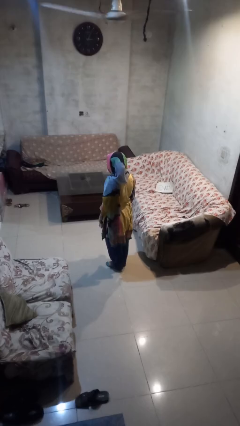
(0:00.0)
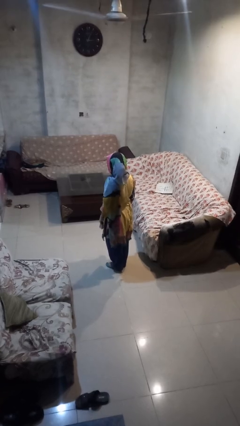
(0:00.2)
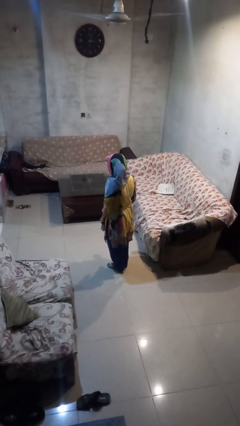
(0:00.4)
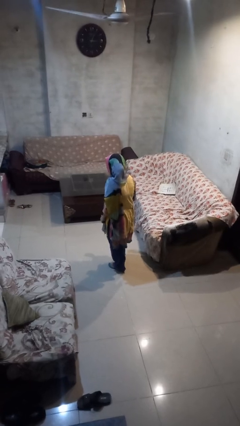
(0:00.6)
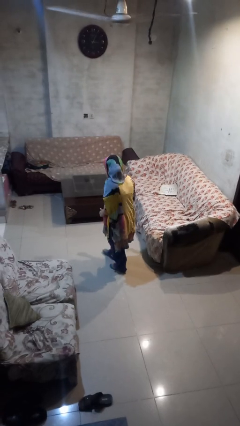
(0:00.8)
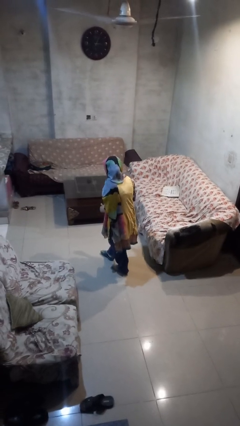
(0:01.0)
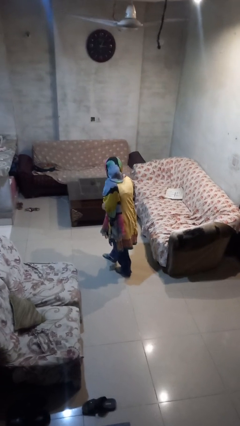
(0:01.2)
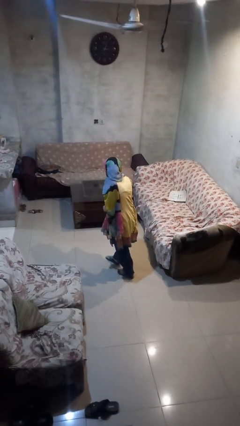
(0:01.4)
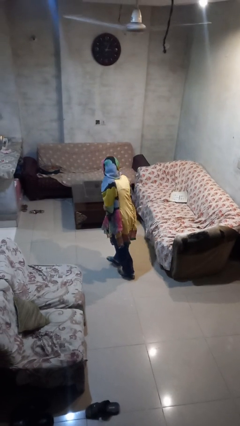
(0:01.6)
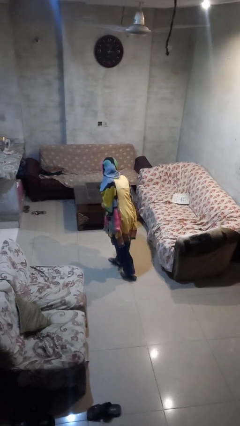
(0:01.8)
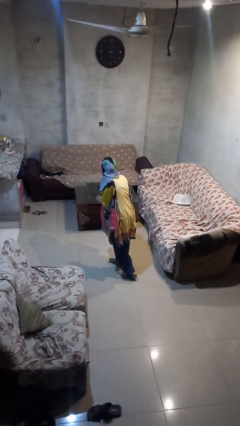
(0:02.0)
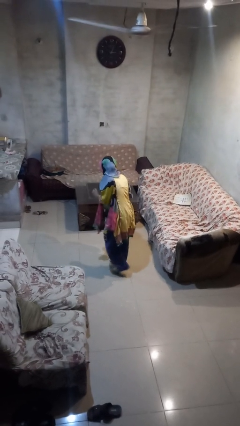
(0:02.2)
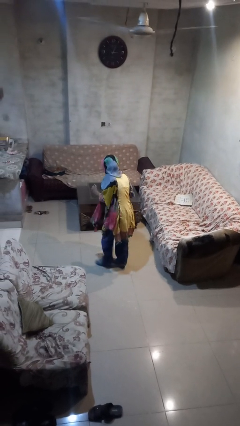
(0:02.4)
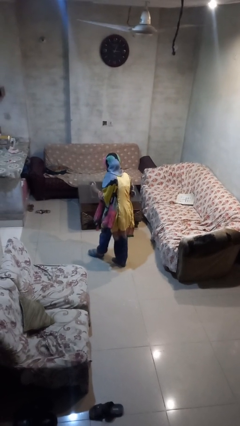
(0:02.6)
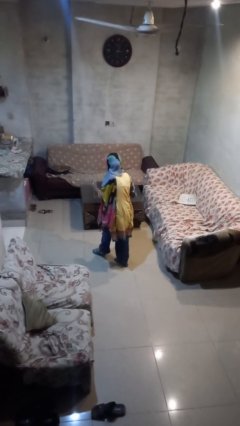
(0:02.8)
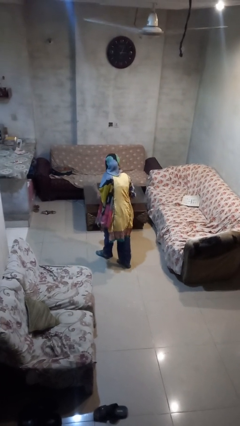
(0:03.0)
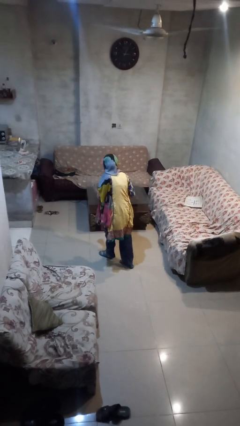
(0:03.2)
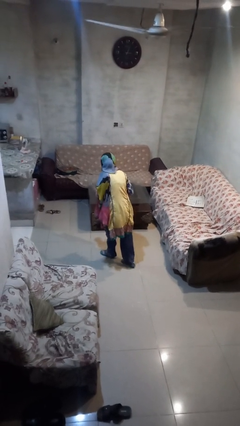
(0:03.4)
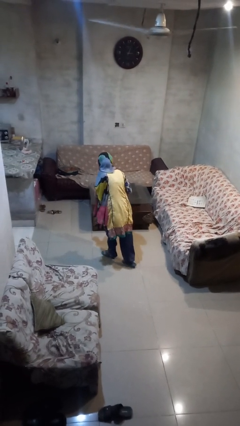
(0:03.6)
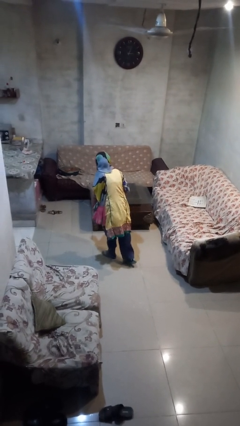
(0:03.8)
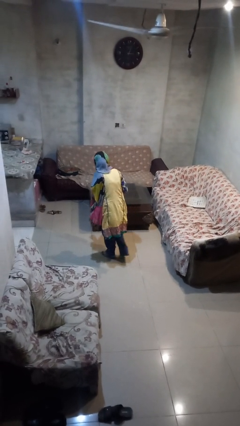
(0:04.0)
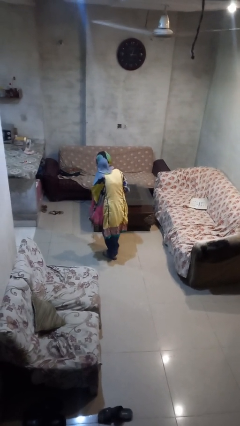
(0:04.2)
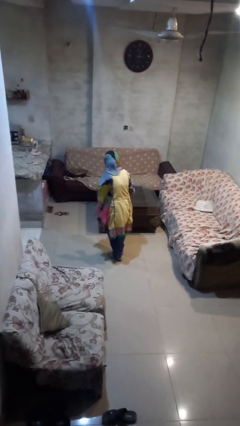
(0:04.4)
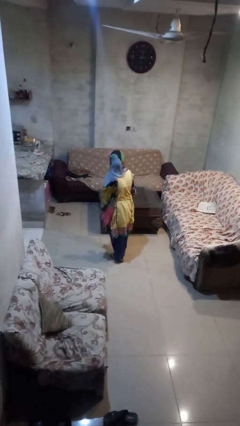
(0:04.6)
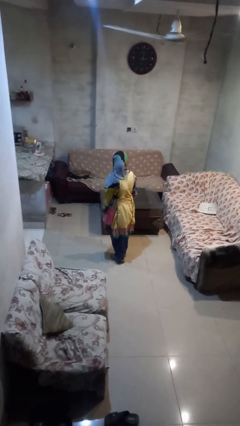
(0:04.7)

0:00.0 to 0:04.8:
person walks tiptoe

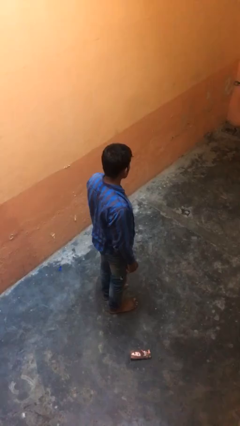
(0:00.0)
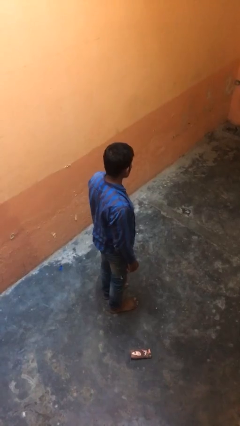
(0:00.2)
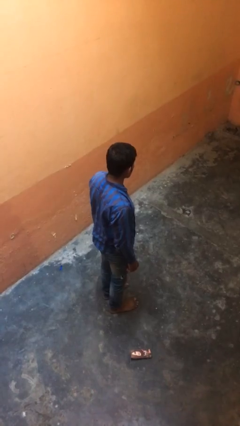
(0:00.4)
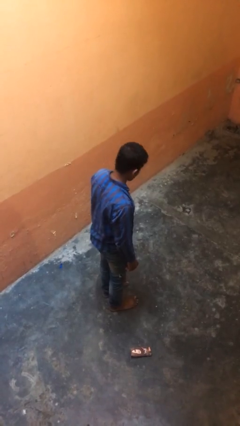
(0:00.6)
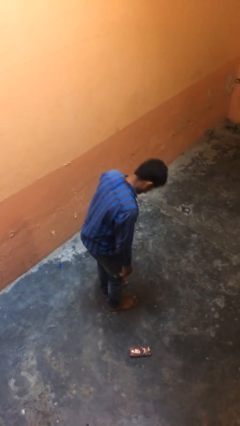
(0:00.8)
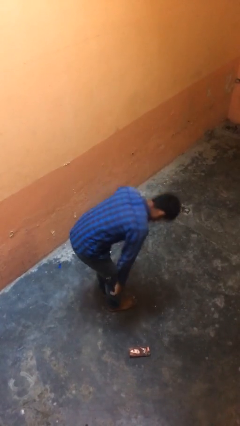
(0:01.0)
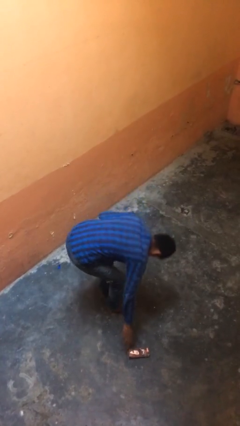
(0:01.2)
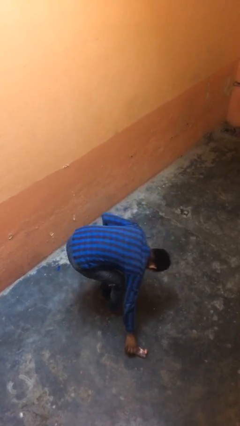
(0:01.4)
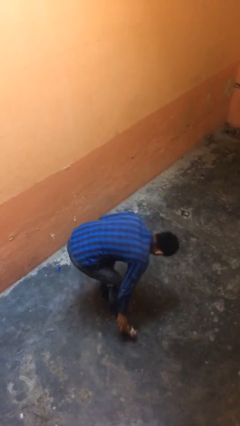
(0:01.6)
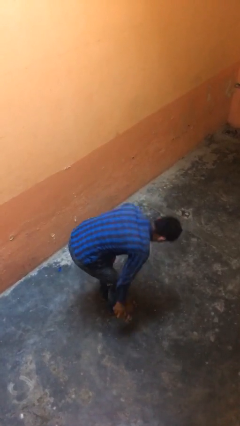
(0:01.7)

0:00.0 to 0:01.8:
person picks up object from floor

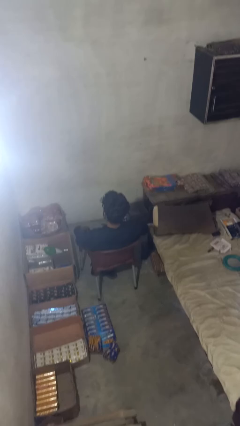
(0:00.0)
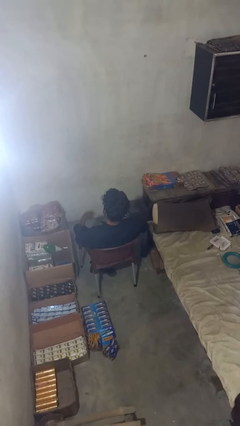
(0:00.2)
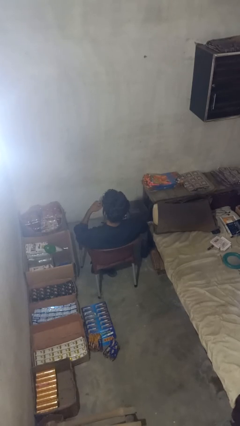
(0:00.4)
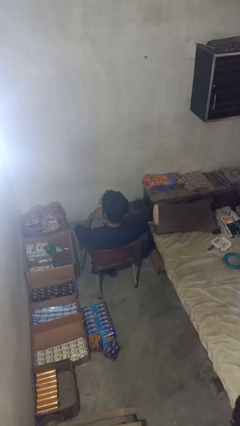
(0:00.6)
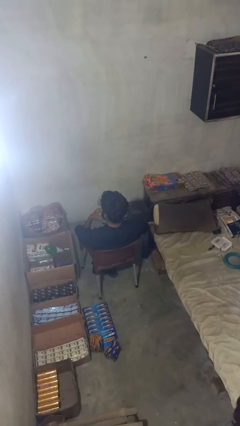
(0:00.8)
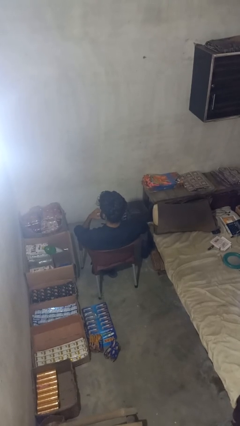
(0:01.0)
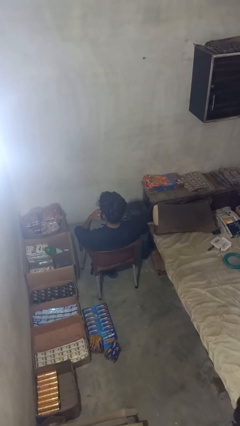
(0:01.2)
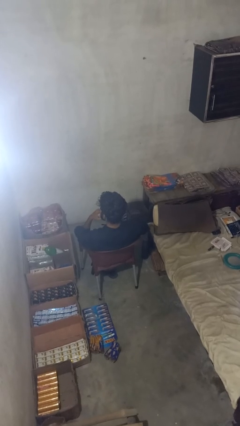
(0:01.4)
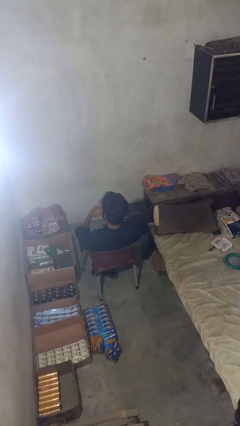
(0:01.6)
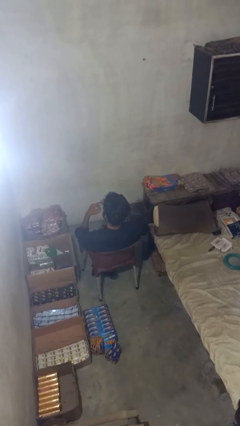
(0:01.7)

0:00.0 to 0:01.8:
person licks fingers

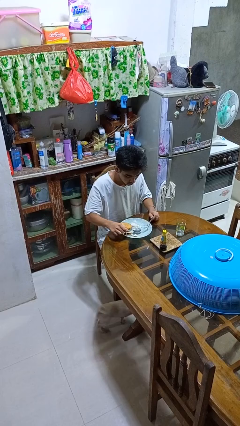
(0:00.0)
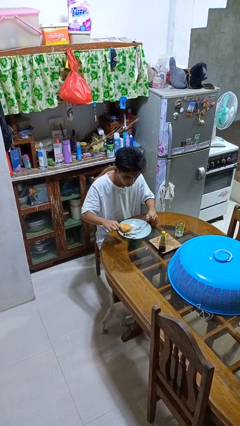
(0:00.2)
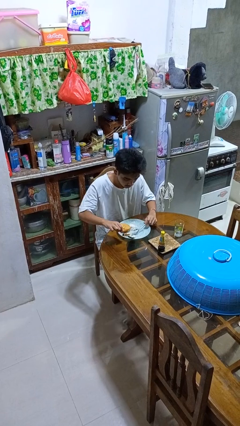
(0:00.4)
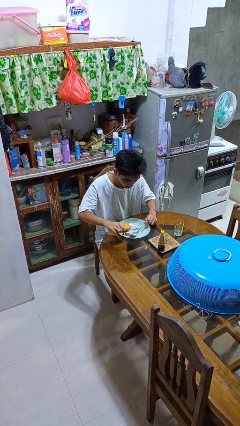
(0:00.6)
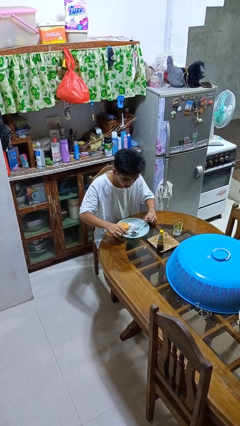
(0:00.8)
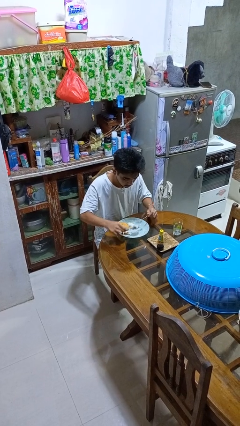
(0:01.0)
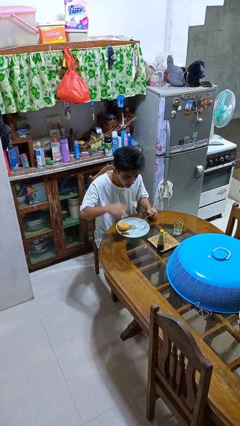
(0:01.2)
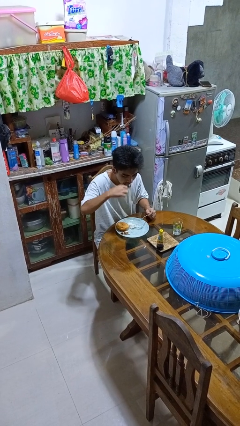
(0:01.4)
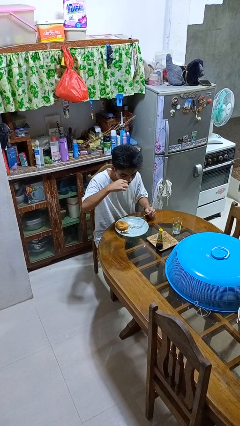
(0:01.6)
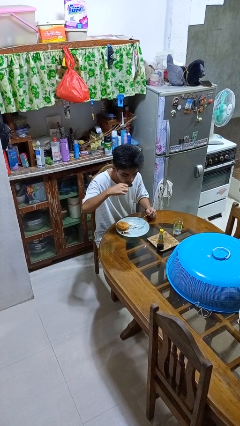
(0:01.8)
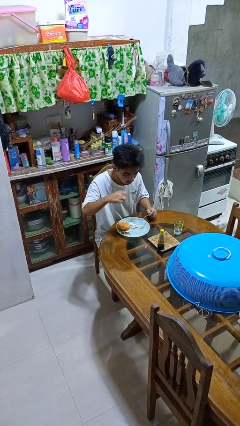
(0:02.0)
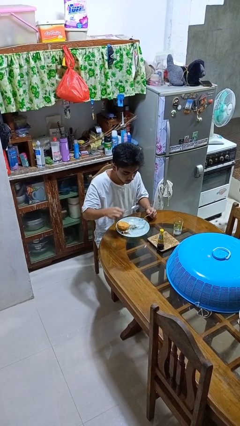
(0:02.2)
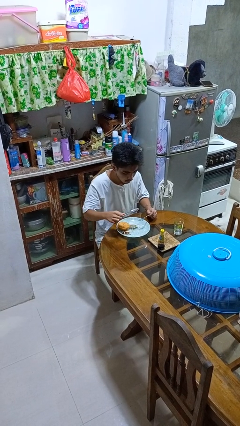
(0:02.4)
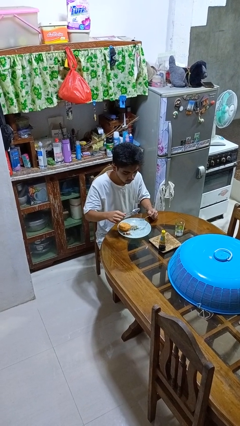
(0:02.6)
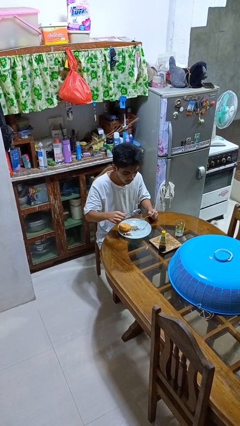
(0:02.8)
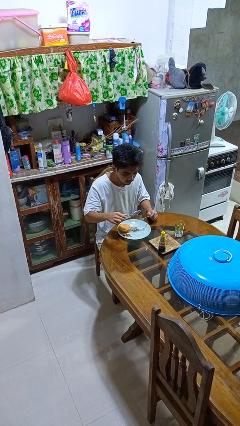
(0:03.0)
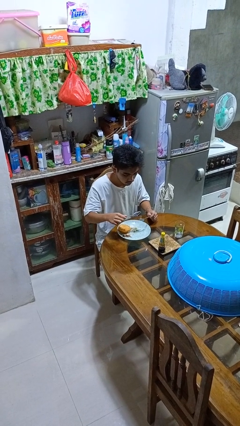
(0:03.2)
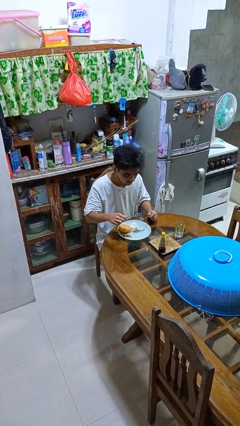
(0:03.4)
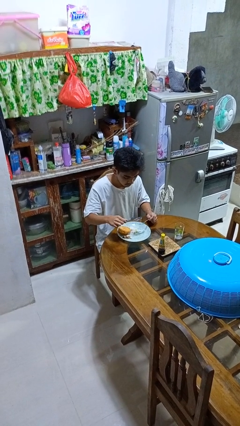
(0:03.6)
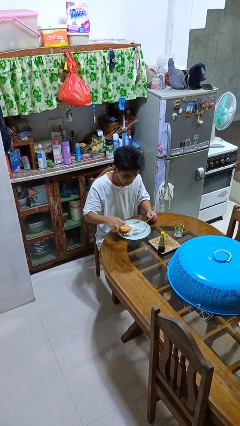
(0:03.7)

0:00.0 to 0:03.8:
person eats with utensil

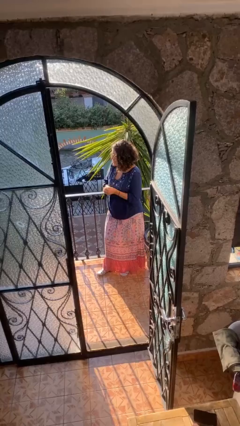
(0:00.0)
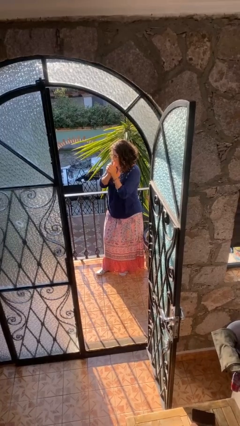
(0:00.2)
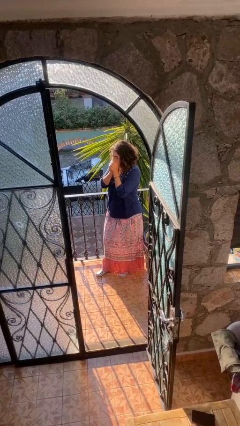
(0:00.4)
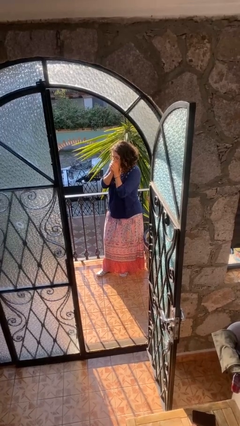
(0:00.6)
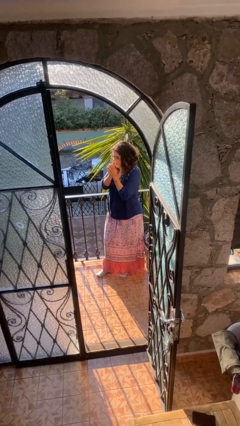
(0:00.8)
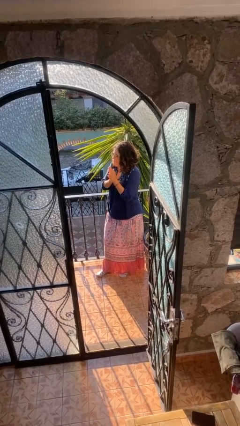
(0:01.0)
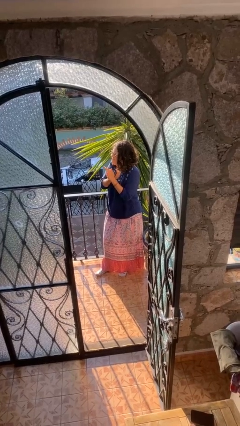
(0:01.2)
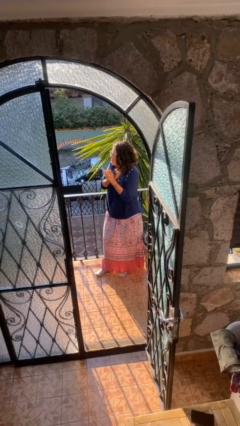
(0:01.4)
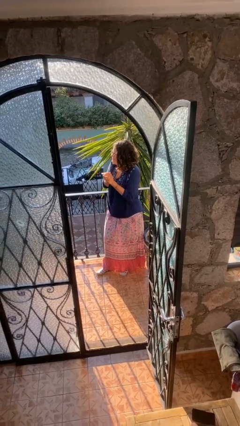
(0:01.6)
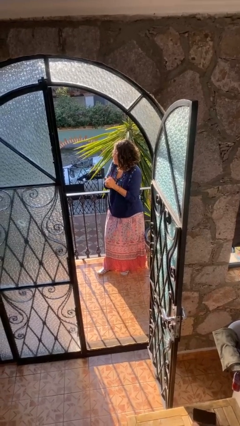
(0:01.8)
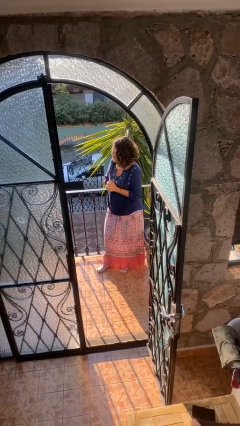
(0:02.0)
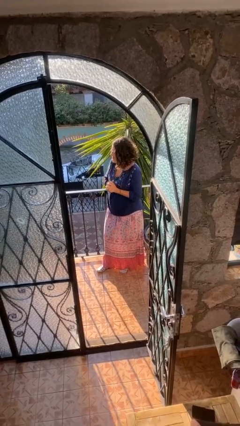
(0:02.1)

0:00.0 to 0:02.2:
person blows into hands

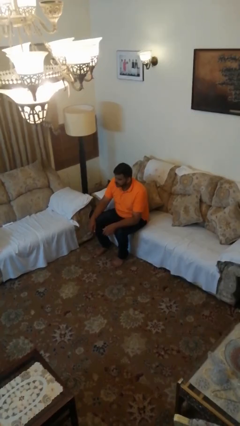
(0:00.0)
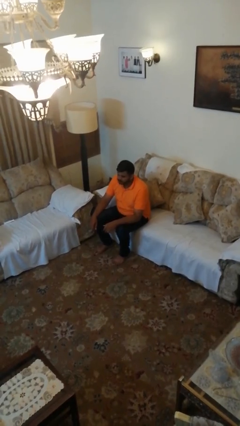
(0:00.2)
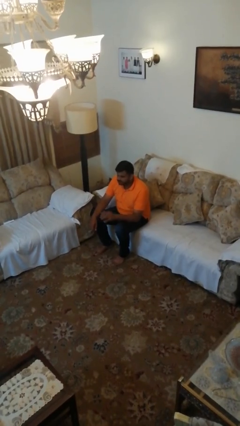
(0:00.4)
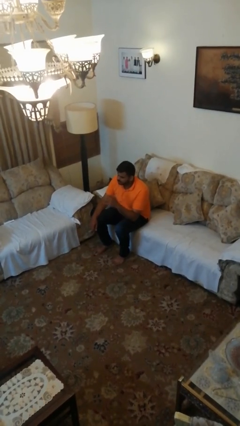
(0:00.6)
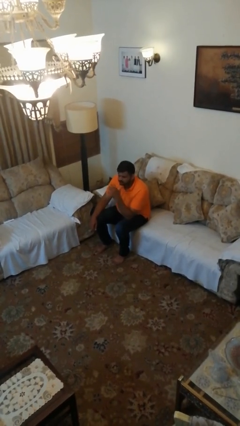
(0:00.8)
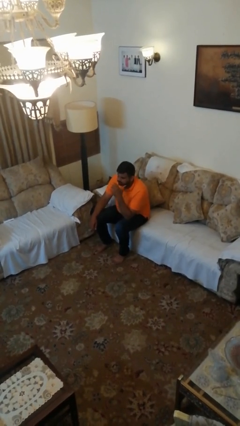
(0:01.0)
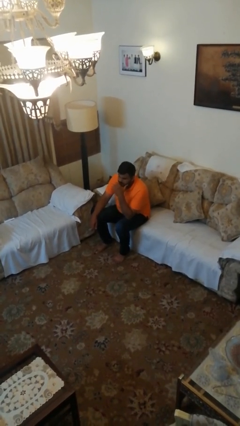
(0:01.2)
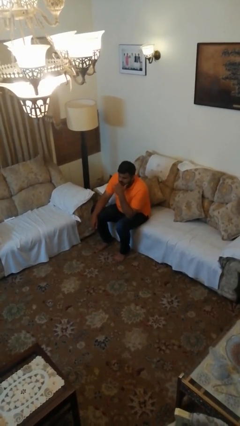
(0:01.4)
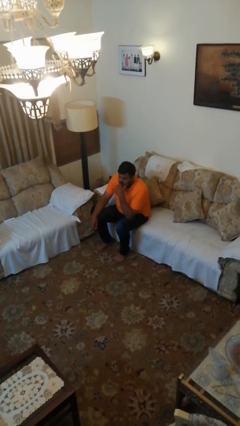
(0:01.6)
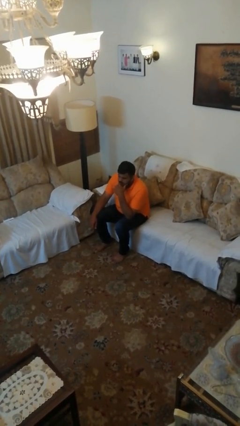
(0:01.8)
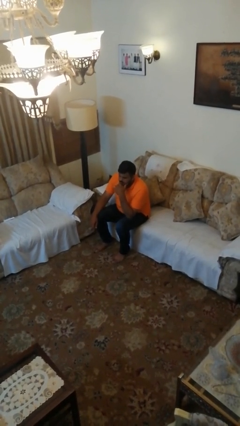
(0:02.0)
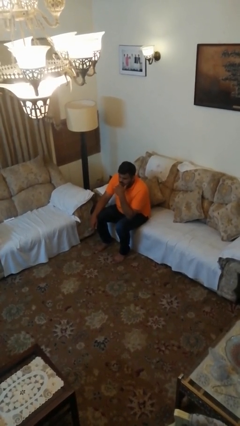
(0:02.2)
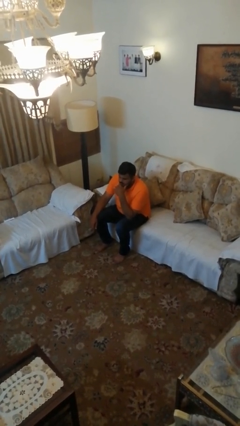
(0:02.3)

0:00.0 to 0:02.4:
person strokes chin

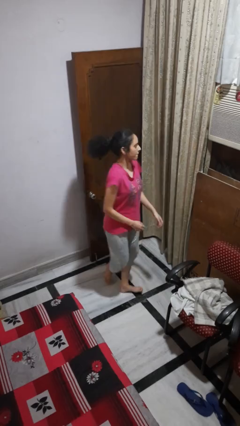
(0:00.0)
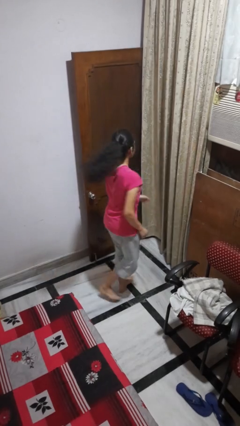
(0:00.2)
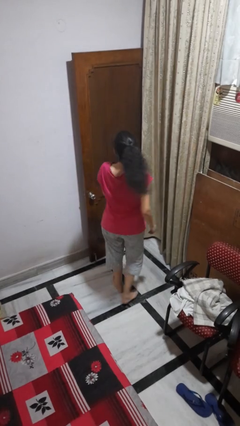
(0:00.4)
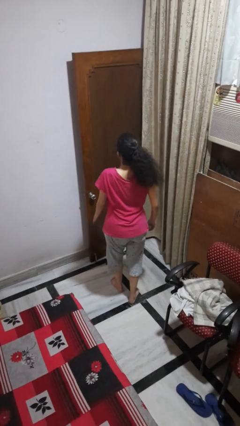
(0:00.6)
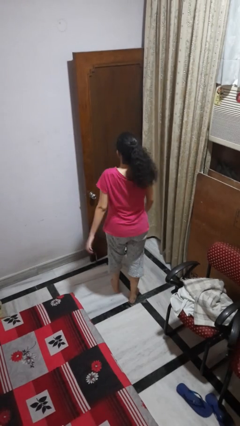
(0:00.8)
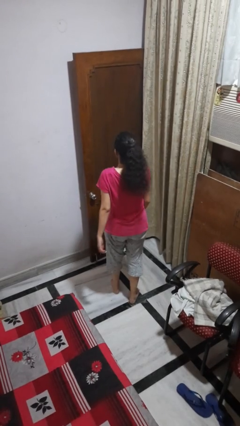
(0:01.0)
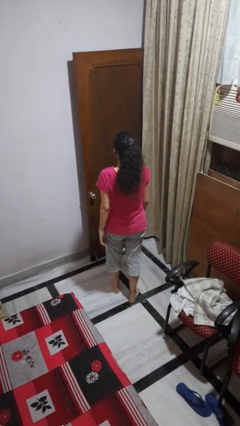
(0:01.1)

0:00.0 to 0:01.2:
person twirls
